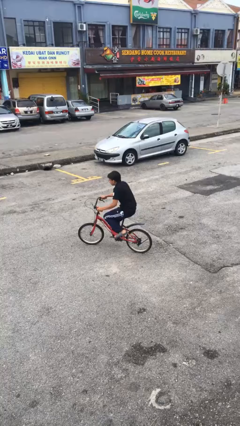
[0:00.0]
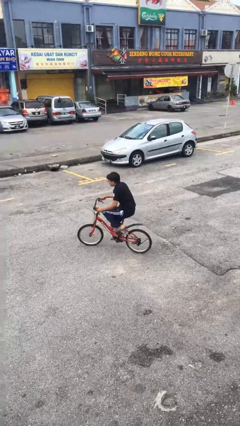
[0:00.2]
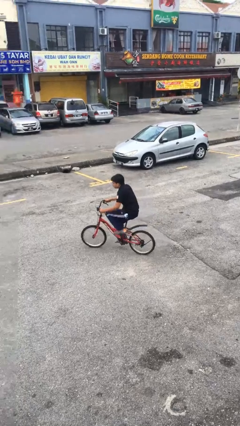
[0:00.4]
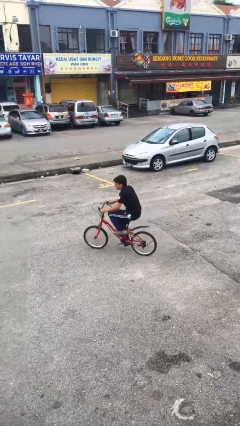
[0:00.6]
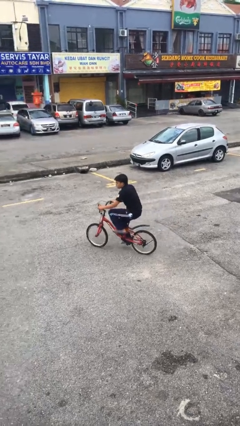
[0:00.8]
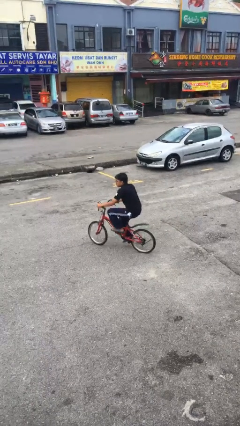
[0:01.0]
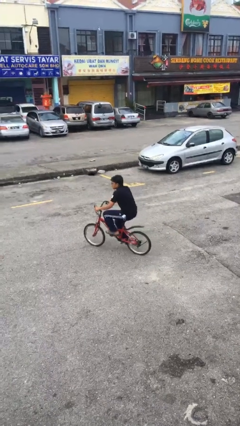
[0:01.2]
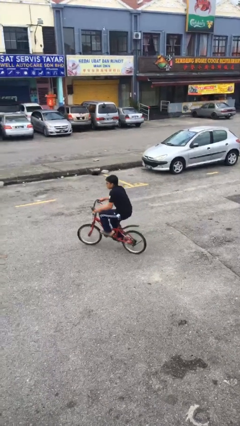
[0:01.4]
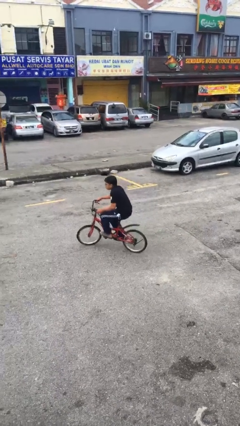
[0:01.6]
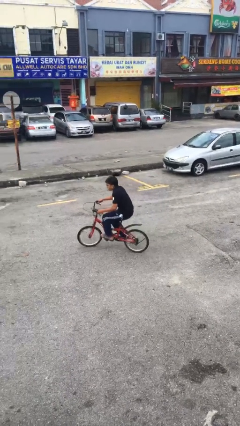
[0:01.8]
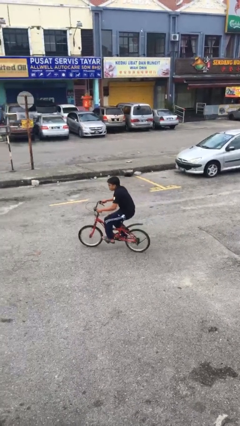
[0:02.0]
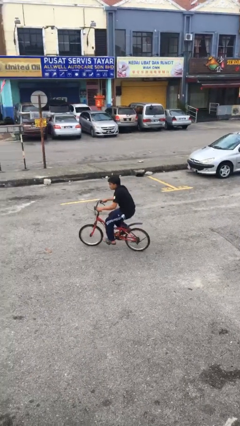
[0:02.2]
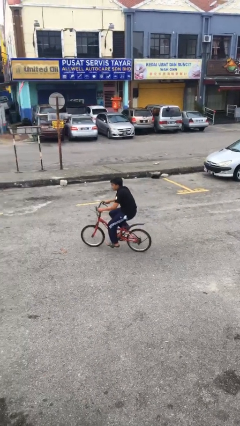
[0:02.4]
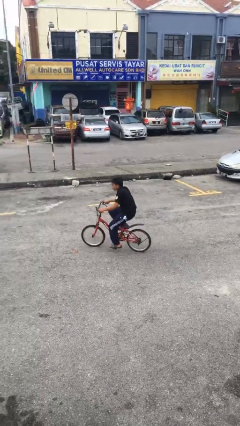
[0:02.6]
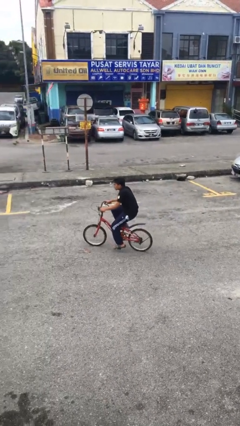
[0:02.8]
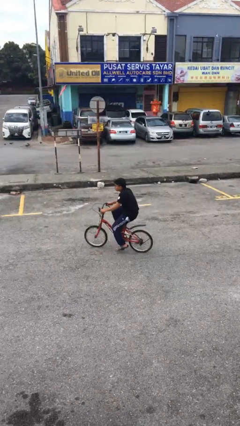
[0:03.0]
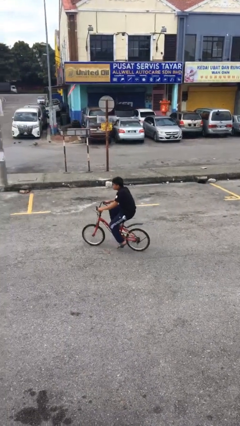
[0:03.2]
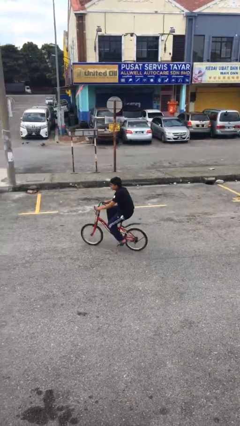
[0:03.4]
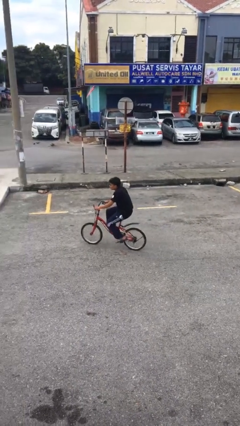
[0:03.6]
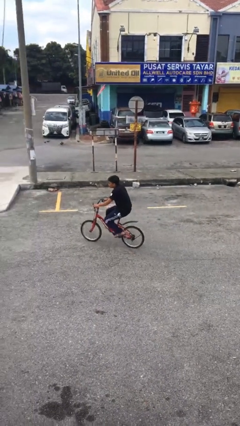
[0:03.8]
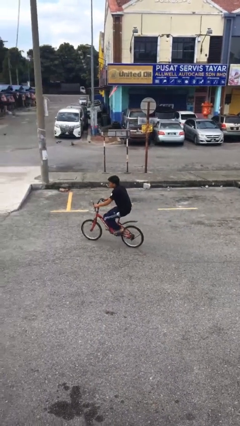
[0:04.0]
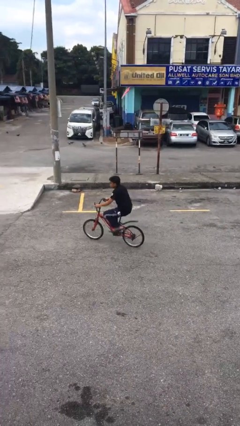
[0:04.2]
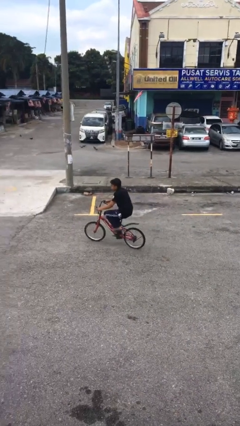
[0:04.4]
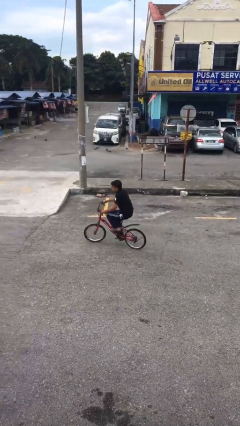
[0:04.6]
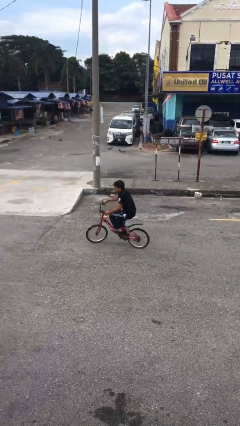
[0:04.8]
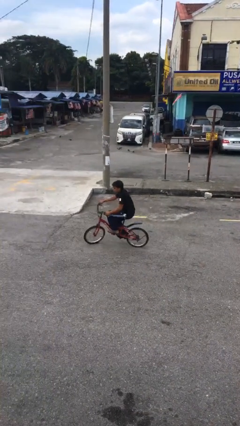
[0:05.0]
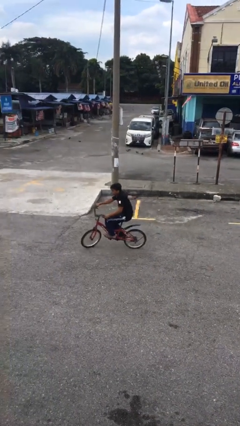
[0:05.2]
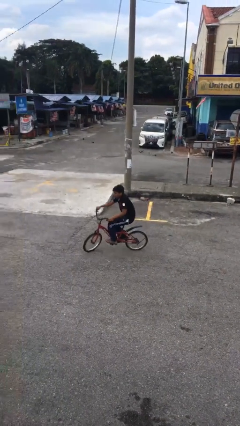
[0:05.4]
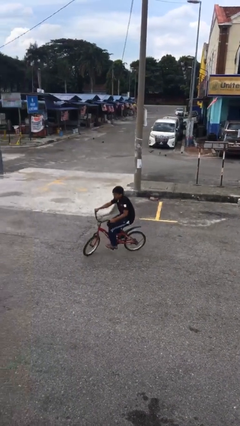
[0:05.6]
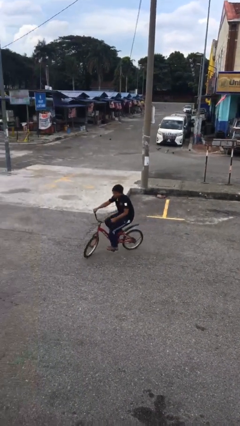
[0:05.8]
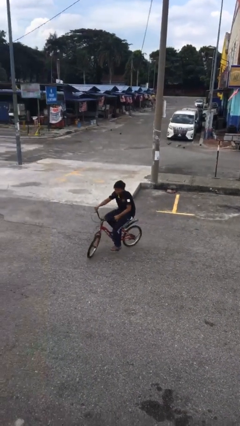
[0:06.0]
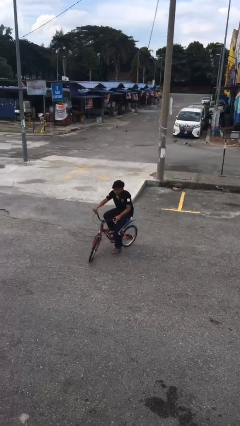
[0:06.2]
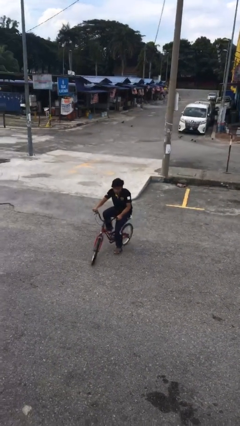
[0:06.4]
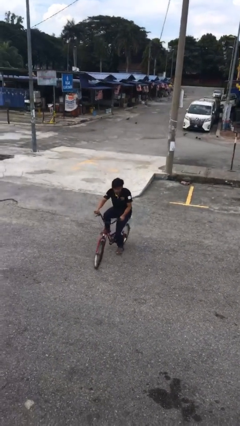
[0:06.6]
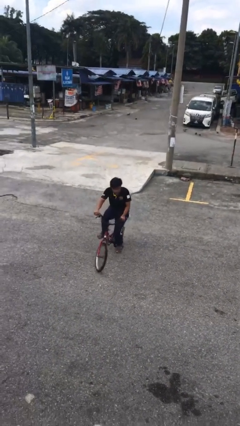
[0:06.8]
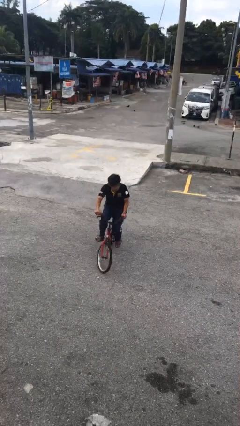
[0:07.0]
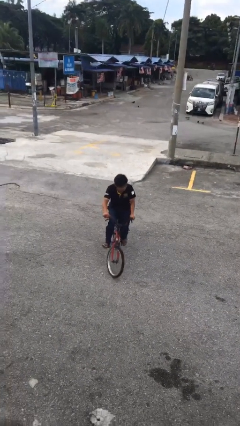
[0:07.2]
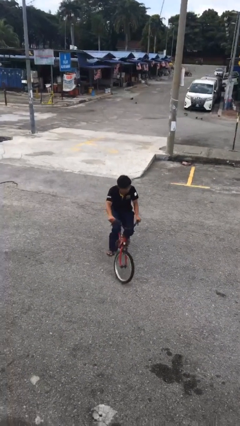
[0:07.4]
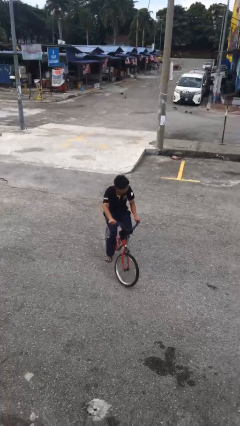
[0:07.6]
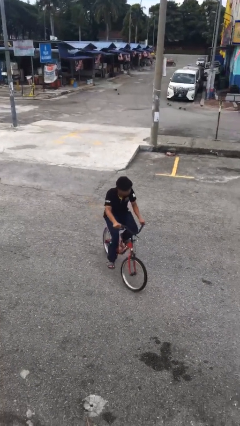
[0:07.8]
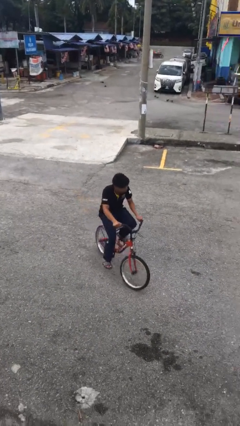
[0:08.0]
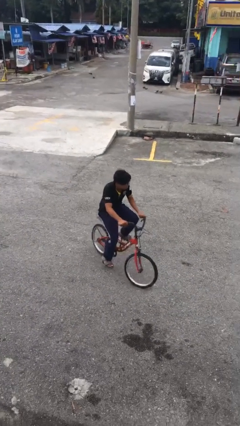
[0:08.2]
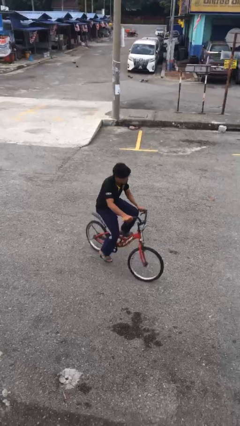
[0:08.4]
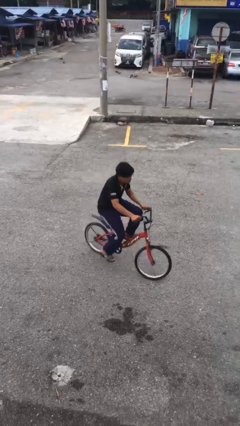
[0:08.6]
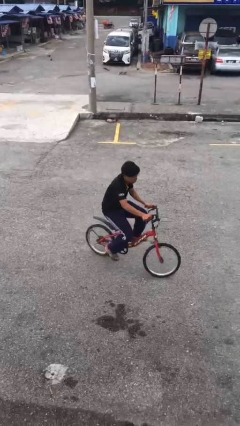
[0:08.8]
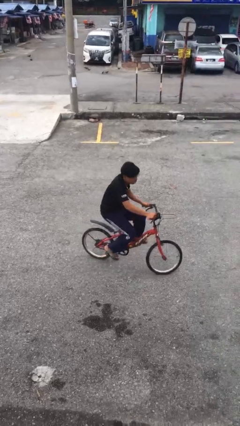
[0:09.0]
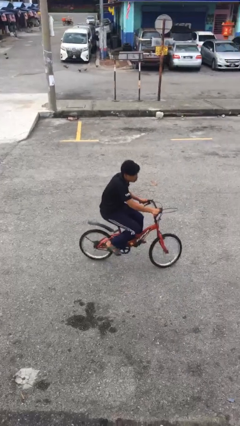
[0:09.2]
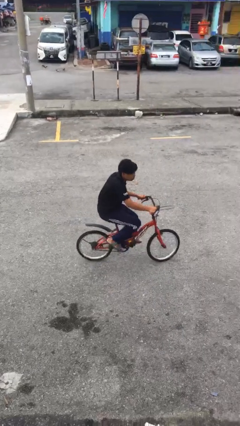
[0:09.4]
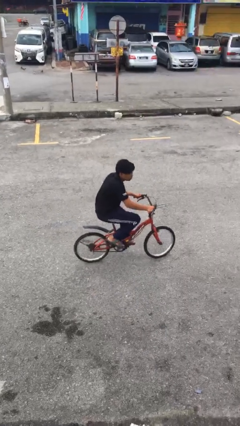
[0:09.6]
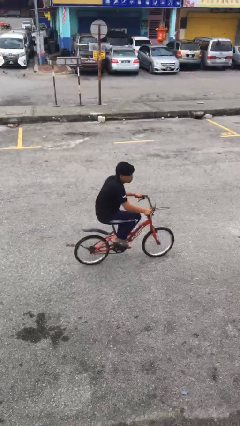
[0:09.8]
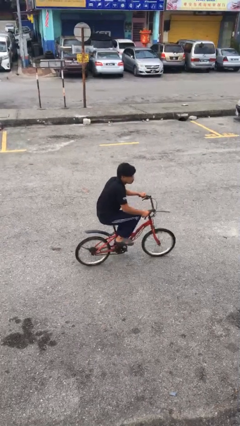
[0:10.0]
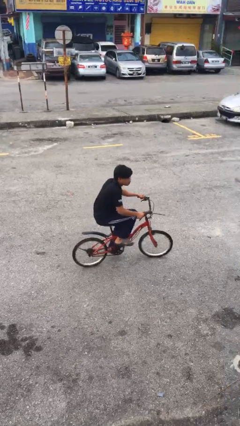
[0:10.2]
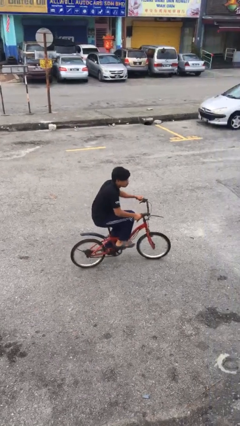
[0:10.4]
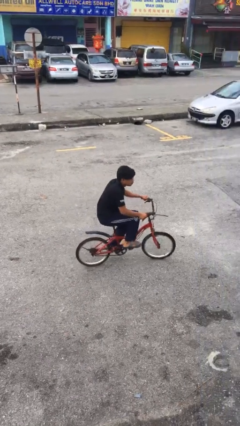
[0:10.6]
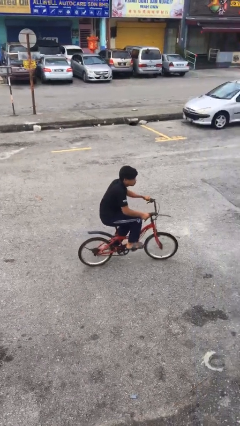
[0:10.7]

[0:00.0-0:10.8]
person rides bicycle

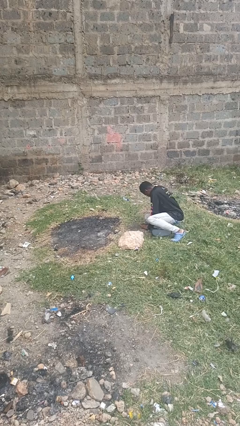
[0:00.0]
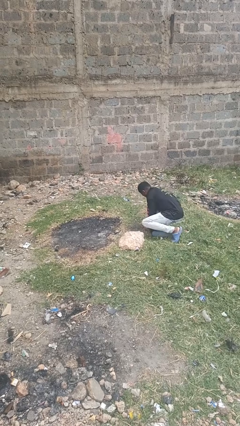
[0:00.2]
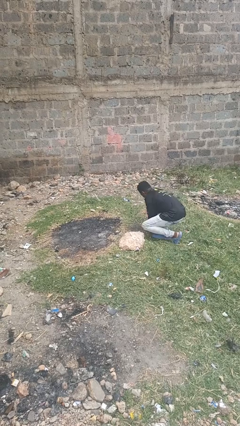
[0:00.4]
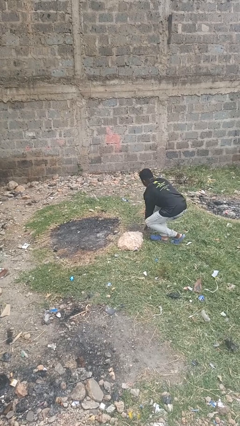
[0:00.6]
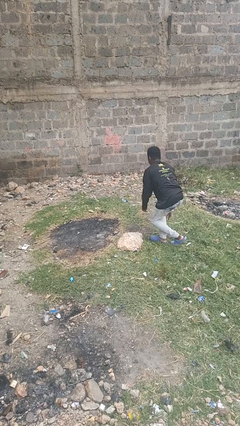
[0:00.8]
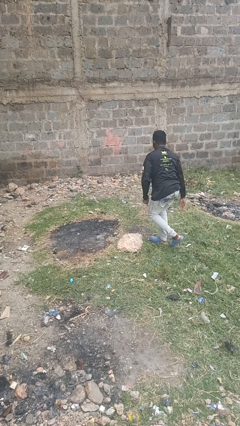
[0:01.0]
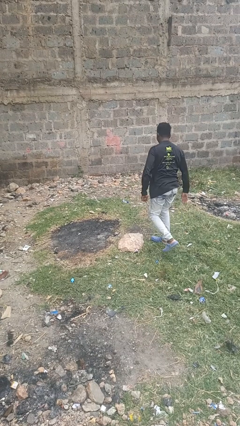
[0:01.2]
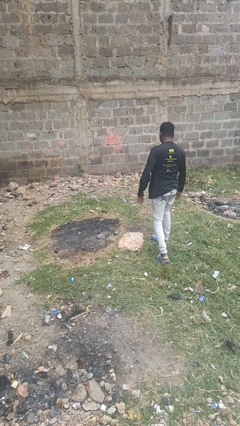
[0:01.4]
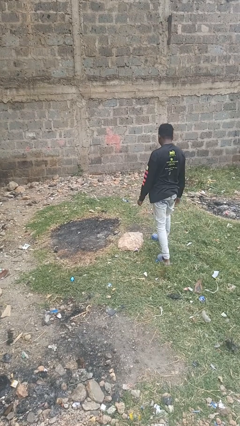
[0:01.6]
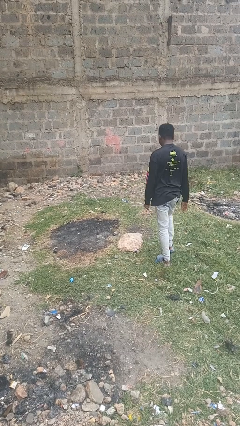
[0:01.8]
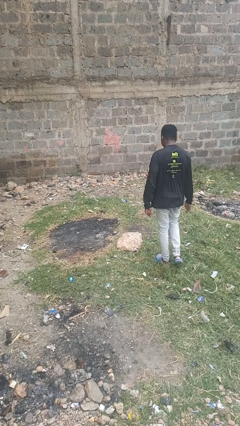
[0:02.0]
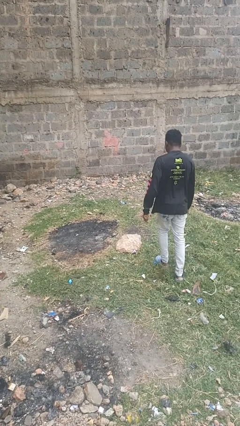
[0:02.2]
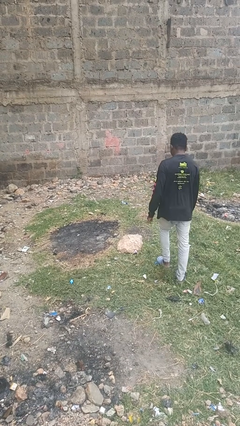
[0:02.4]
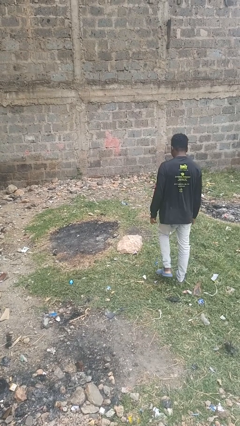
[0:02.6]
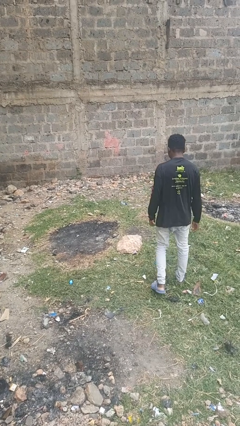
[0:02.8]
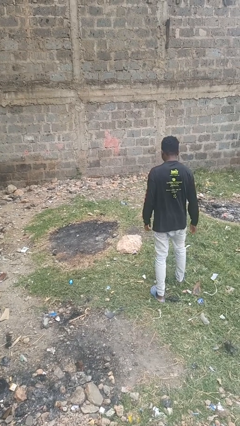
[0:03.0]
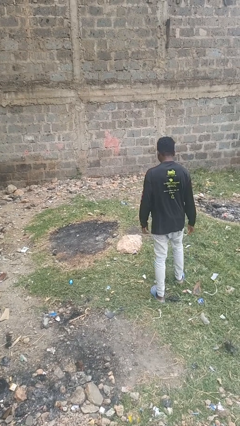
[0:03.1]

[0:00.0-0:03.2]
person stands up from floor

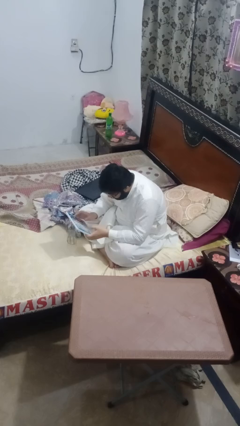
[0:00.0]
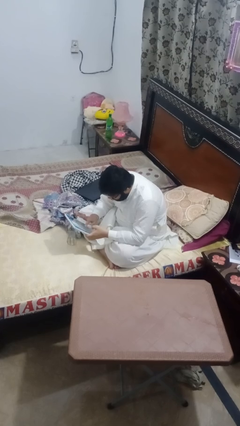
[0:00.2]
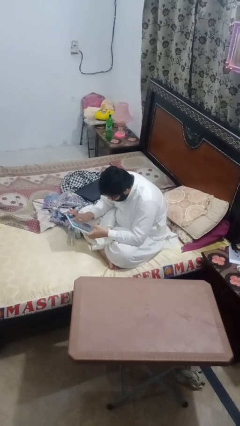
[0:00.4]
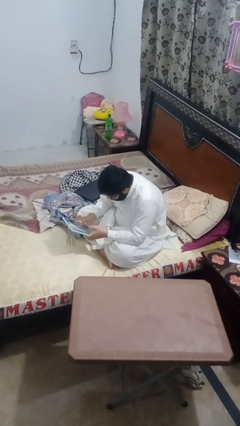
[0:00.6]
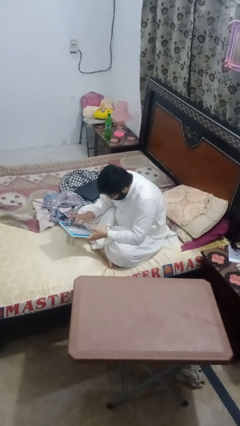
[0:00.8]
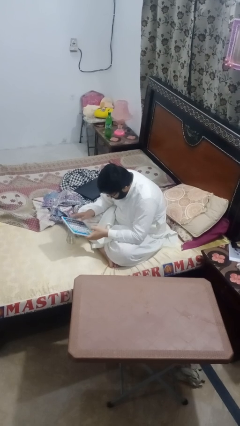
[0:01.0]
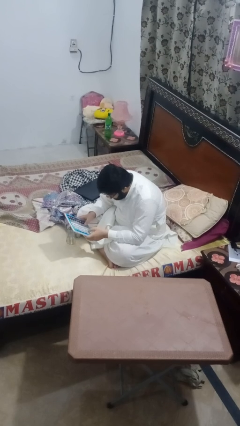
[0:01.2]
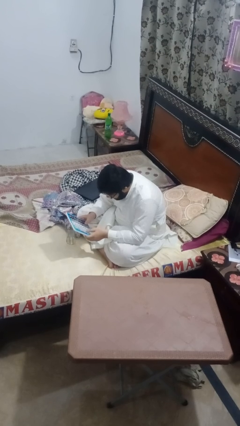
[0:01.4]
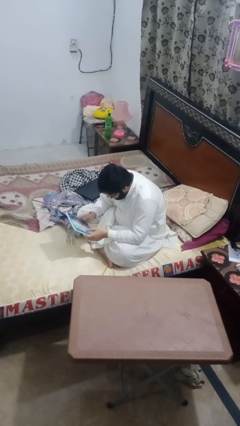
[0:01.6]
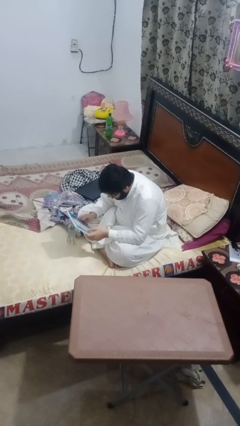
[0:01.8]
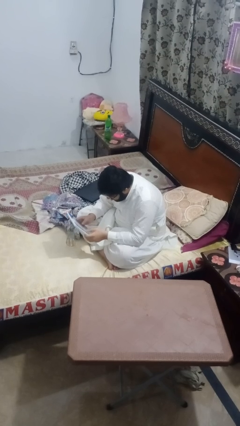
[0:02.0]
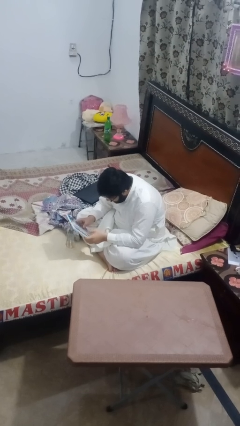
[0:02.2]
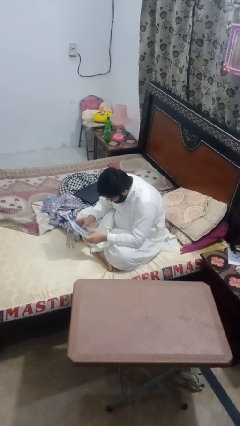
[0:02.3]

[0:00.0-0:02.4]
person interacts with tablet

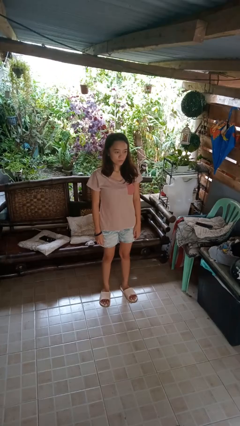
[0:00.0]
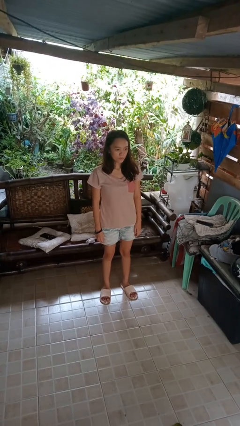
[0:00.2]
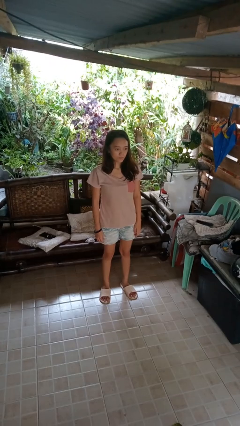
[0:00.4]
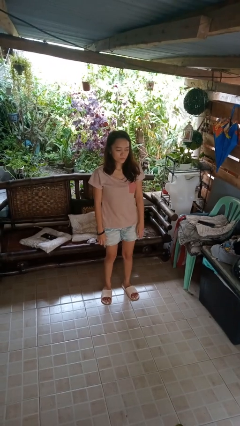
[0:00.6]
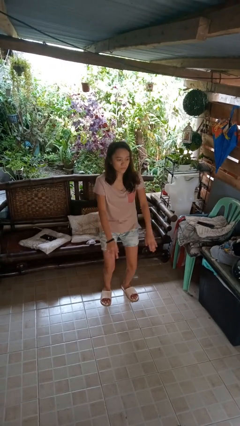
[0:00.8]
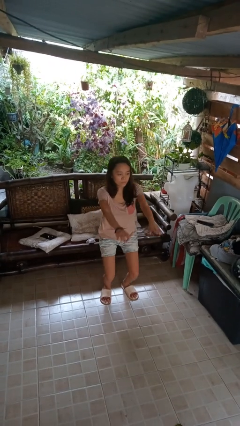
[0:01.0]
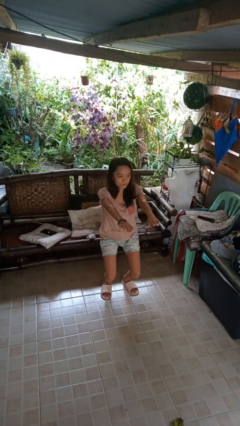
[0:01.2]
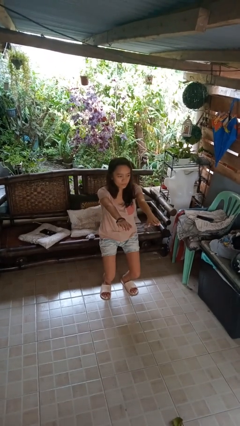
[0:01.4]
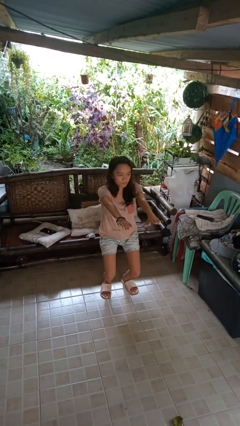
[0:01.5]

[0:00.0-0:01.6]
person squats
